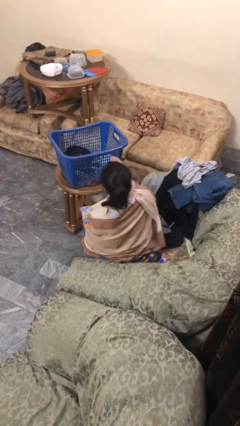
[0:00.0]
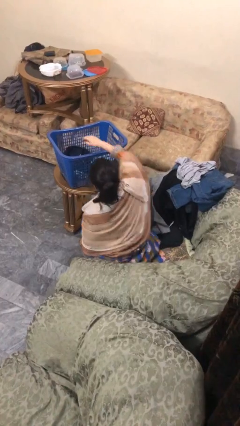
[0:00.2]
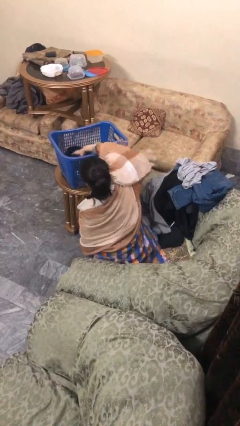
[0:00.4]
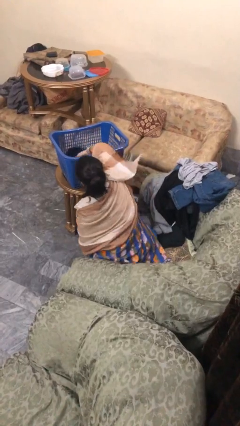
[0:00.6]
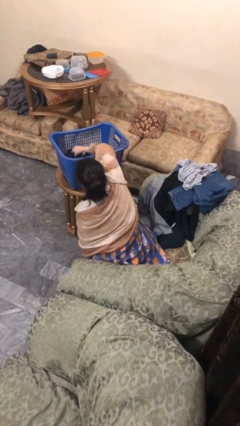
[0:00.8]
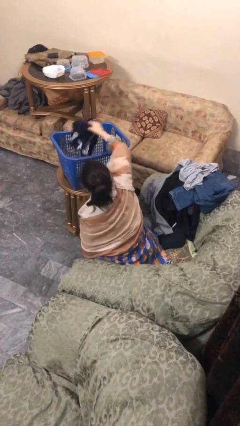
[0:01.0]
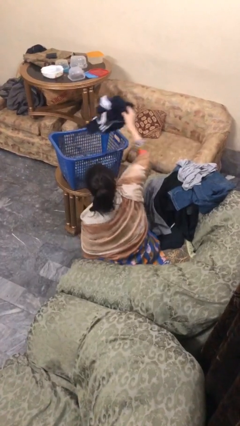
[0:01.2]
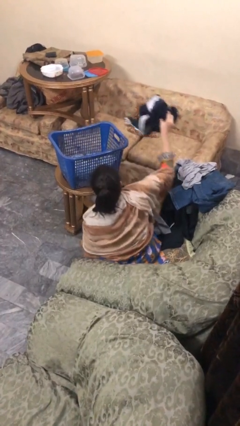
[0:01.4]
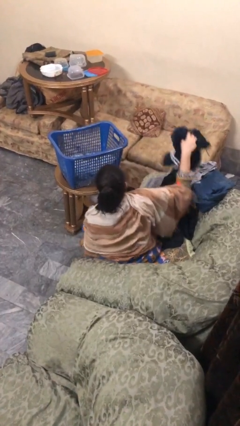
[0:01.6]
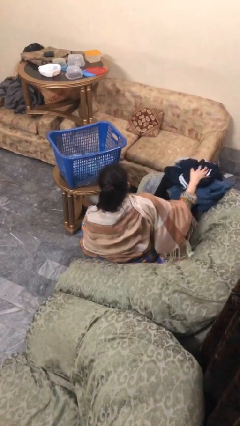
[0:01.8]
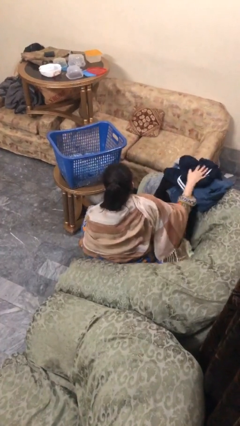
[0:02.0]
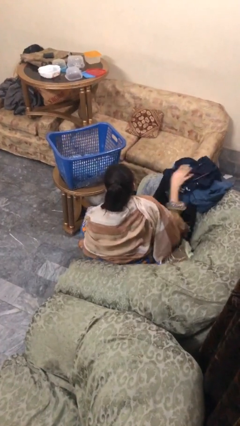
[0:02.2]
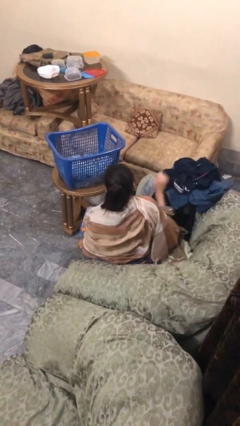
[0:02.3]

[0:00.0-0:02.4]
person takes object from basket

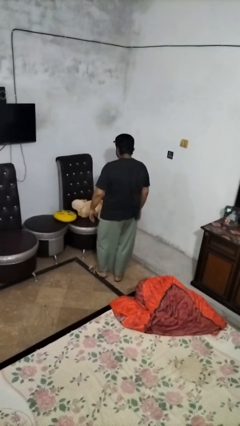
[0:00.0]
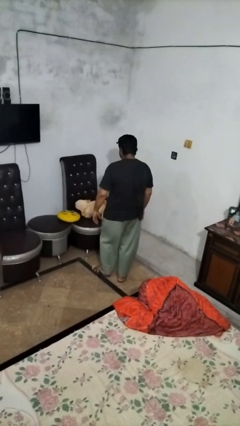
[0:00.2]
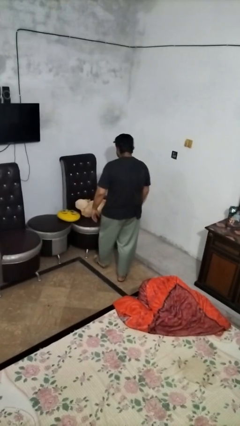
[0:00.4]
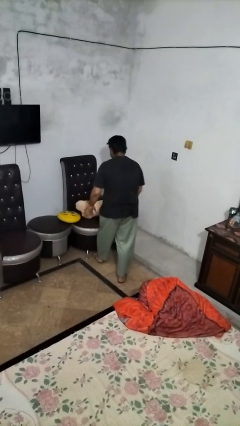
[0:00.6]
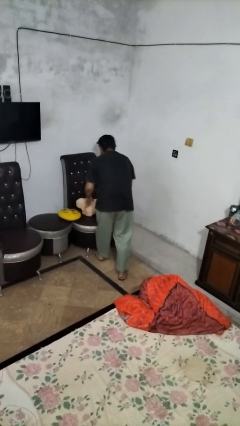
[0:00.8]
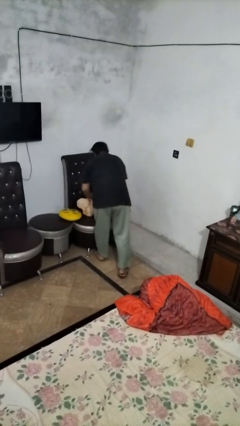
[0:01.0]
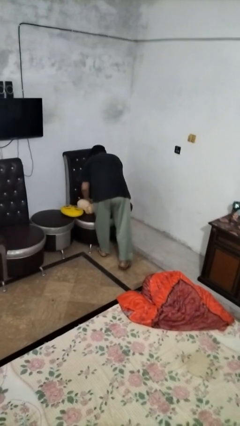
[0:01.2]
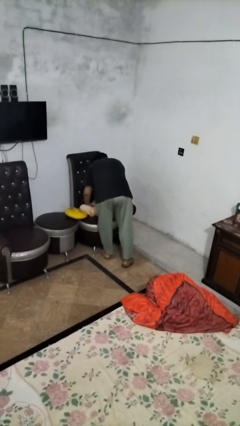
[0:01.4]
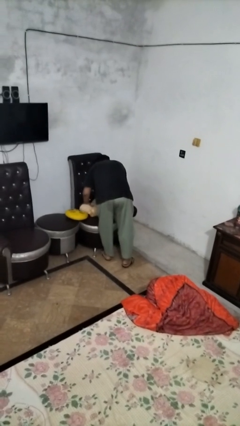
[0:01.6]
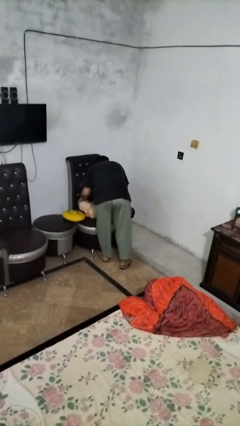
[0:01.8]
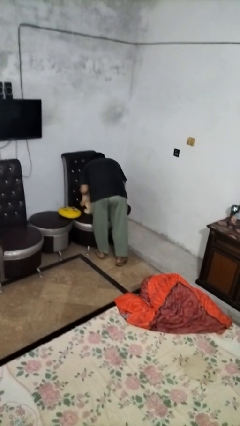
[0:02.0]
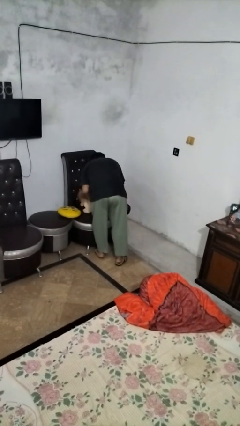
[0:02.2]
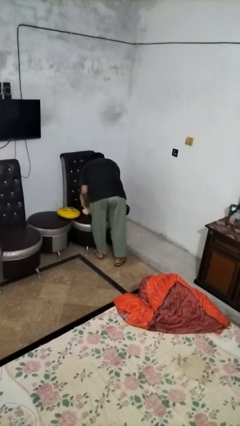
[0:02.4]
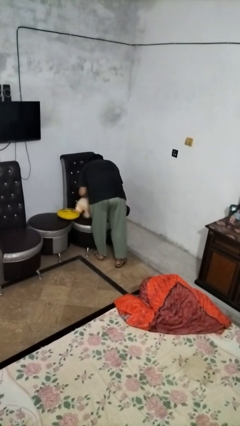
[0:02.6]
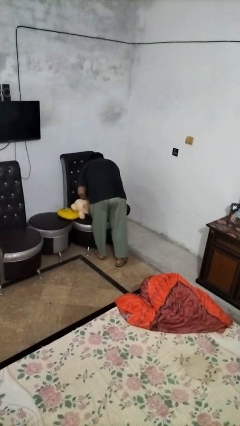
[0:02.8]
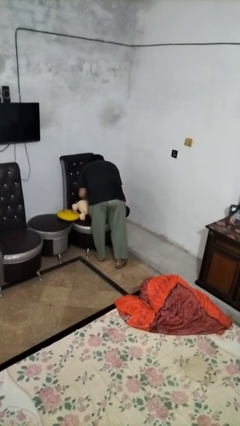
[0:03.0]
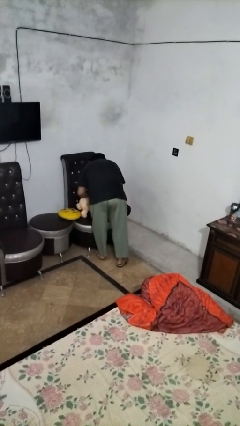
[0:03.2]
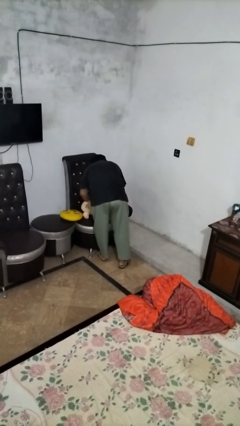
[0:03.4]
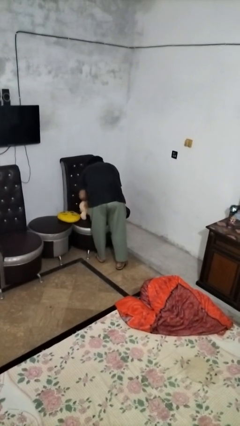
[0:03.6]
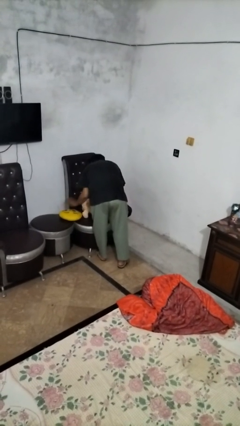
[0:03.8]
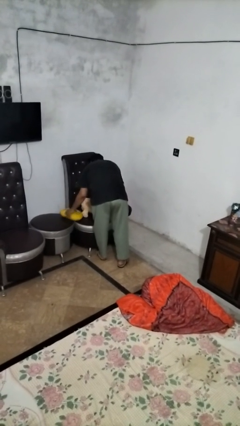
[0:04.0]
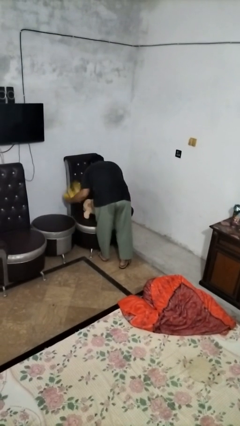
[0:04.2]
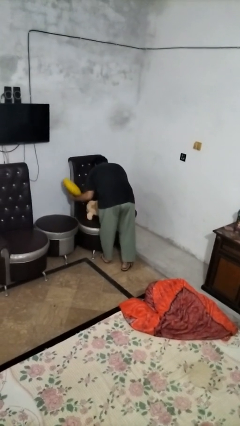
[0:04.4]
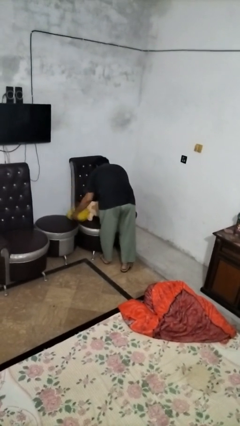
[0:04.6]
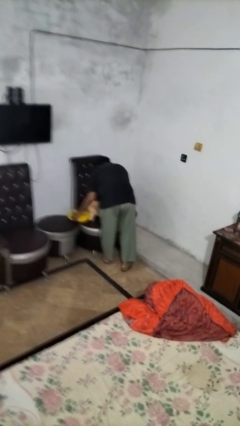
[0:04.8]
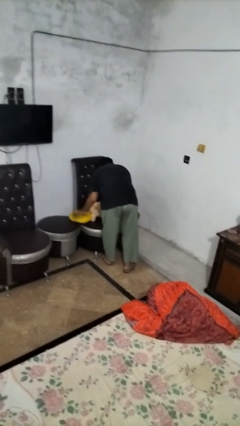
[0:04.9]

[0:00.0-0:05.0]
person searches in couch

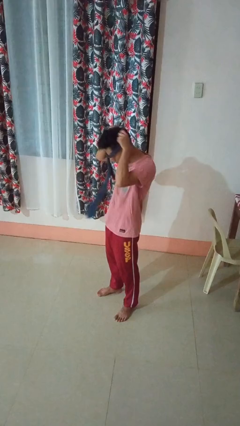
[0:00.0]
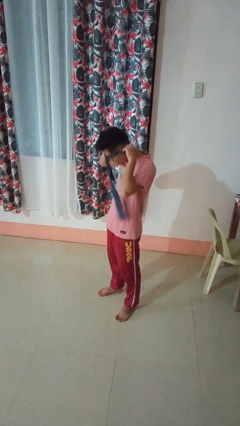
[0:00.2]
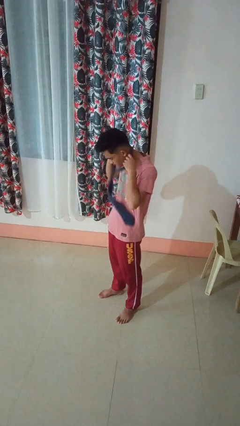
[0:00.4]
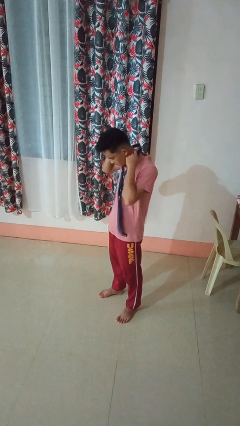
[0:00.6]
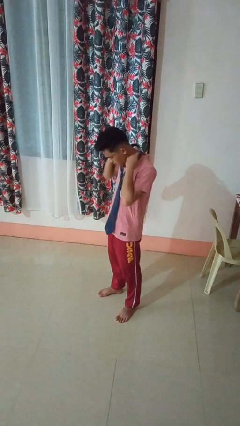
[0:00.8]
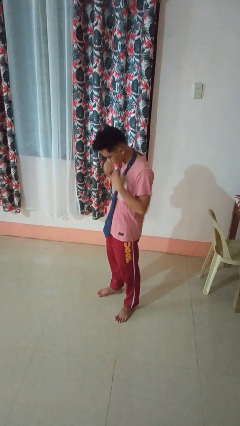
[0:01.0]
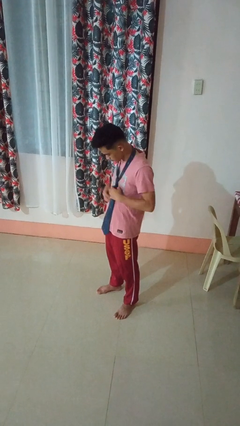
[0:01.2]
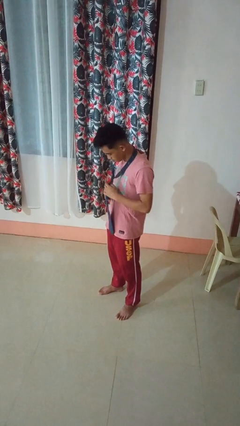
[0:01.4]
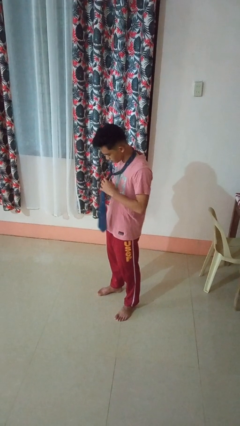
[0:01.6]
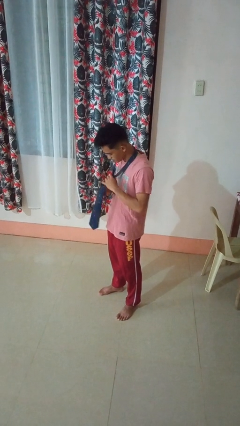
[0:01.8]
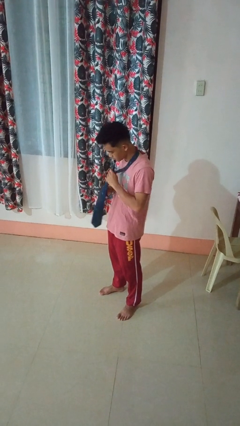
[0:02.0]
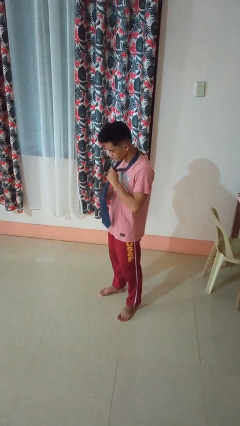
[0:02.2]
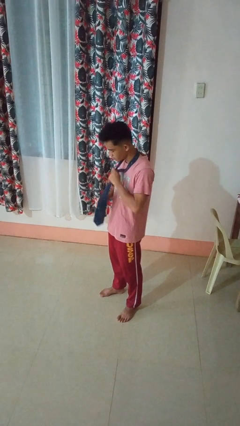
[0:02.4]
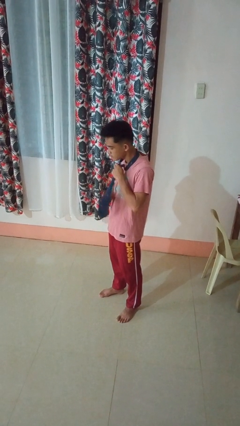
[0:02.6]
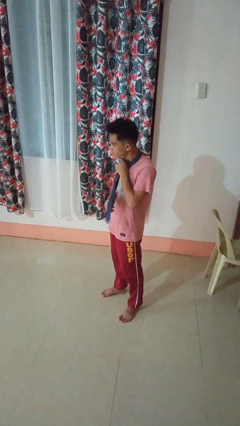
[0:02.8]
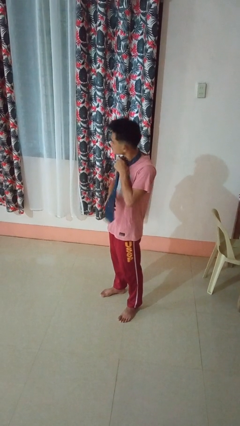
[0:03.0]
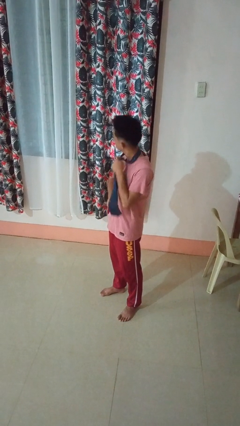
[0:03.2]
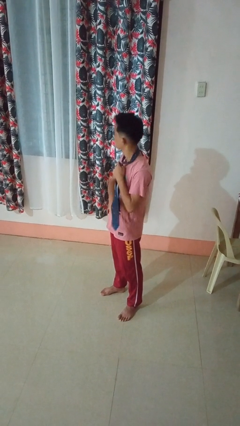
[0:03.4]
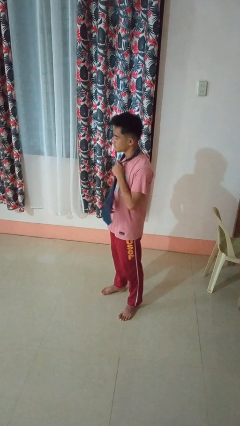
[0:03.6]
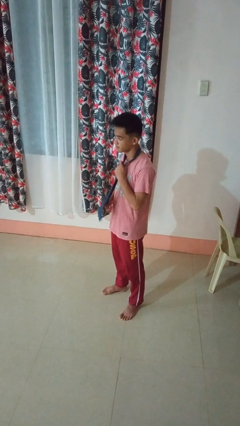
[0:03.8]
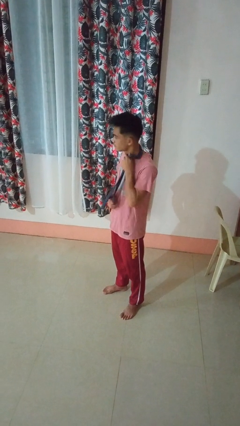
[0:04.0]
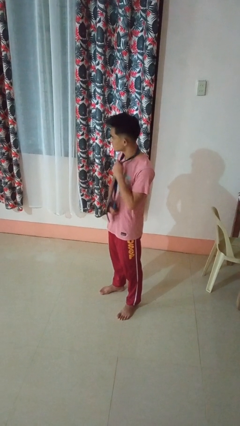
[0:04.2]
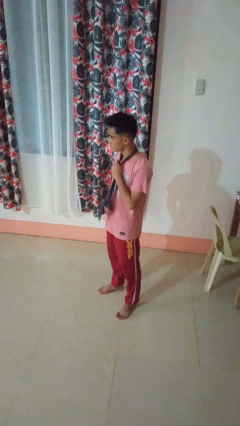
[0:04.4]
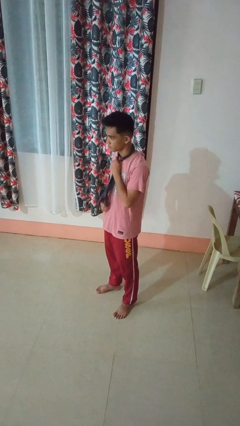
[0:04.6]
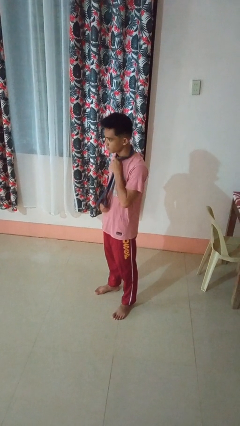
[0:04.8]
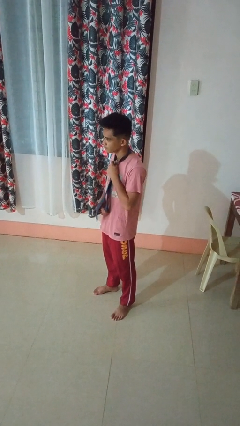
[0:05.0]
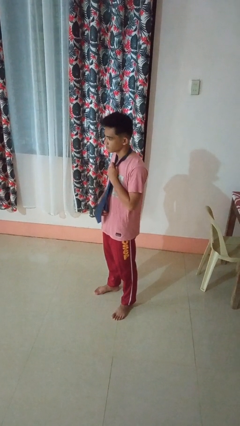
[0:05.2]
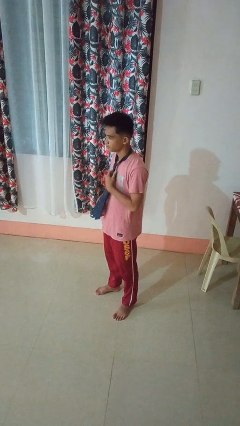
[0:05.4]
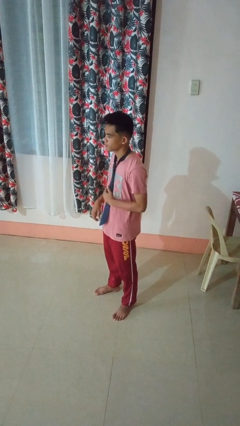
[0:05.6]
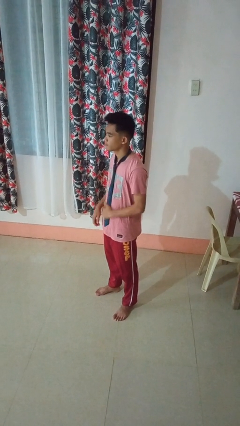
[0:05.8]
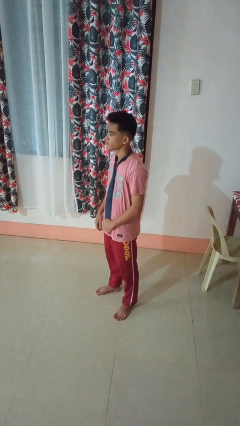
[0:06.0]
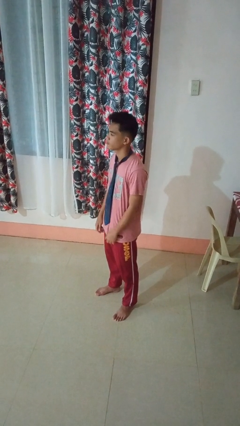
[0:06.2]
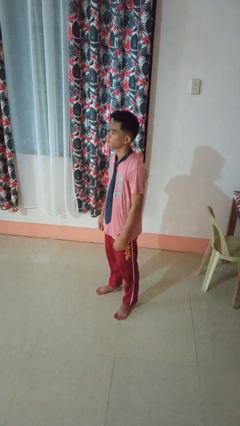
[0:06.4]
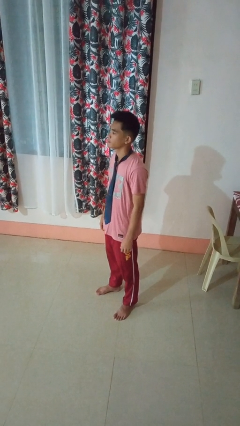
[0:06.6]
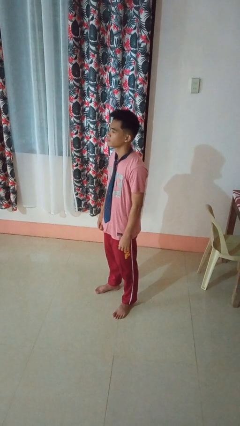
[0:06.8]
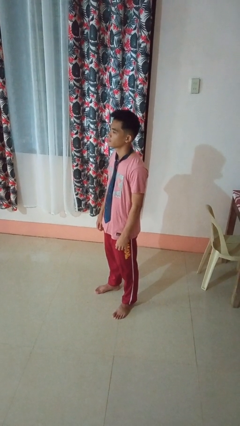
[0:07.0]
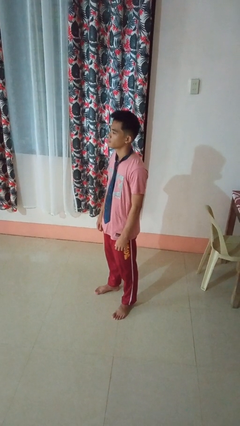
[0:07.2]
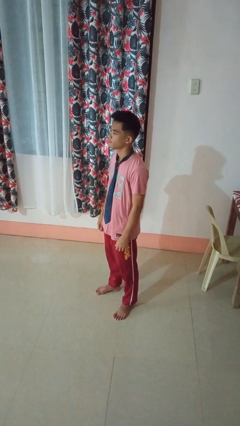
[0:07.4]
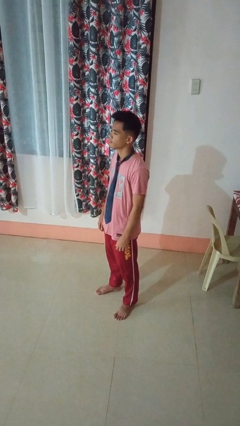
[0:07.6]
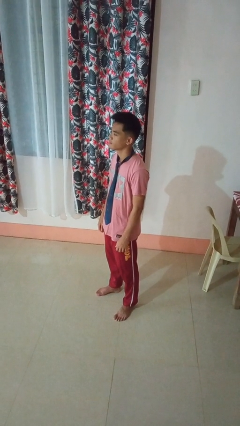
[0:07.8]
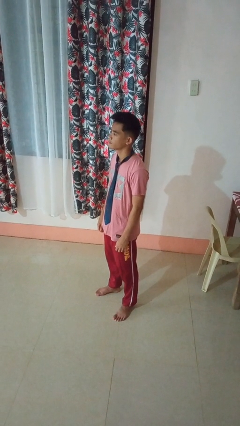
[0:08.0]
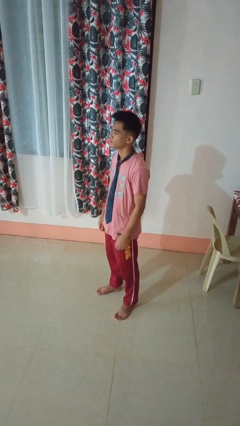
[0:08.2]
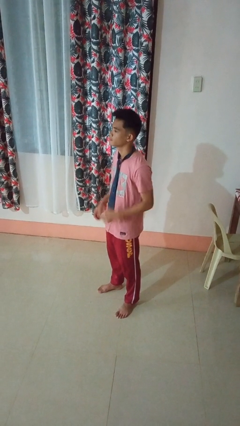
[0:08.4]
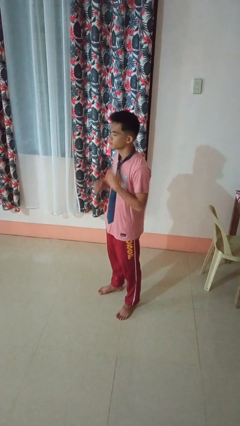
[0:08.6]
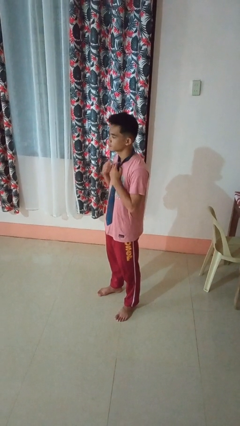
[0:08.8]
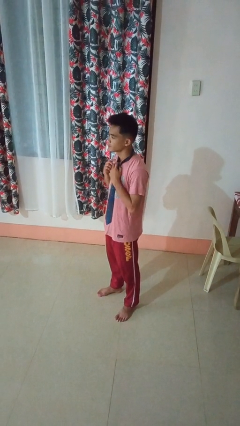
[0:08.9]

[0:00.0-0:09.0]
person puts on necktie

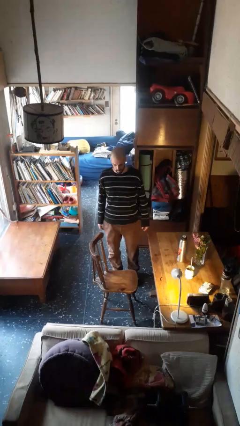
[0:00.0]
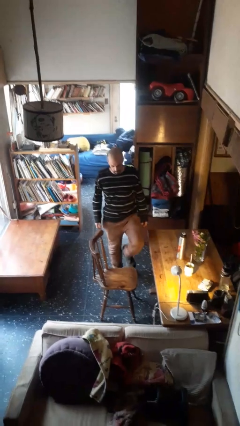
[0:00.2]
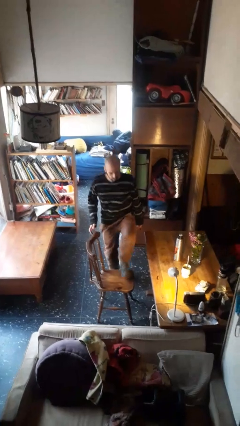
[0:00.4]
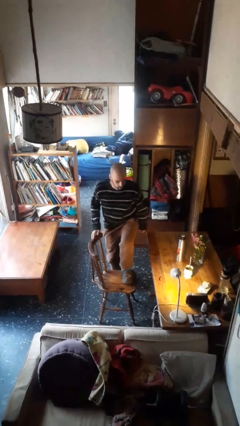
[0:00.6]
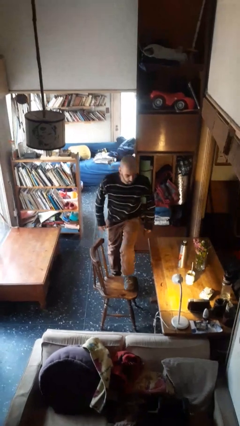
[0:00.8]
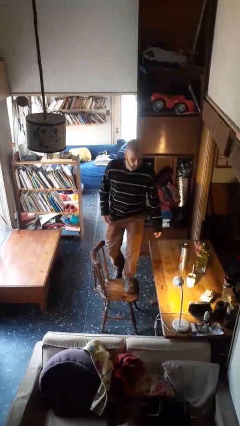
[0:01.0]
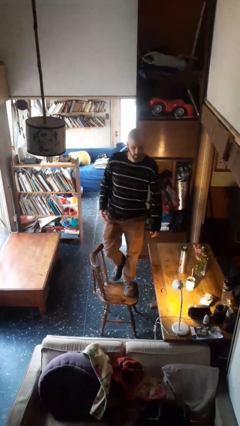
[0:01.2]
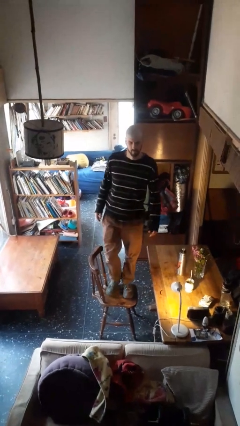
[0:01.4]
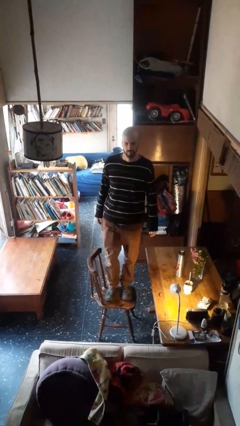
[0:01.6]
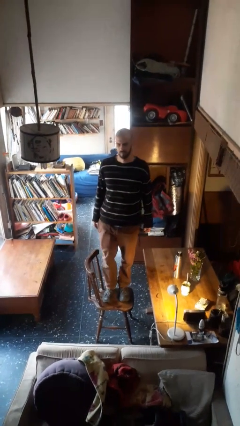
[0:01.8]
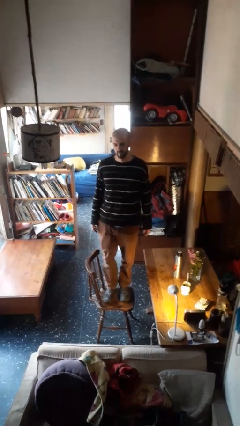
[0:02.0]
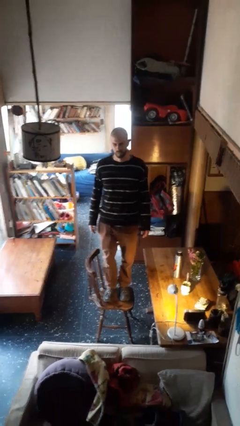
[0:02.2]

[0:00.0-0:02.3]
person climbs on chair
